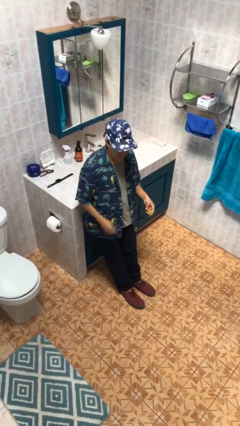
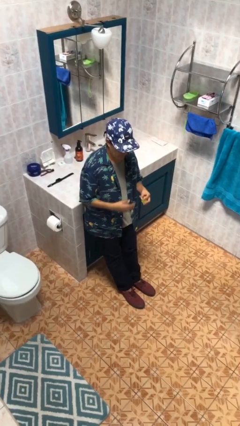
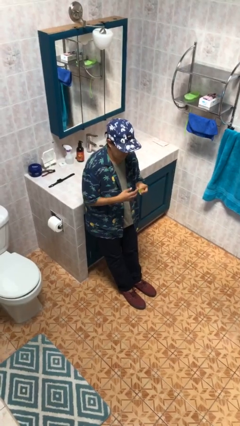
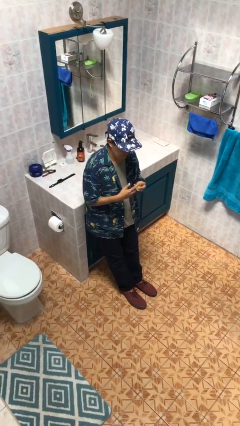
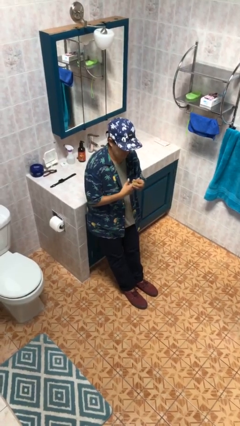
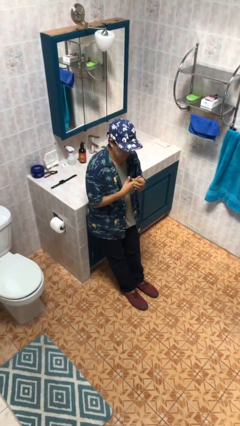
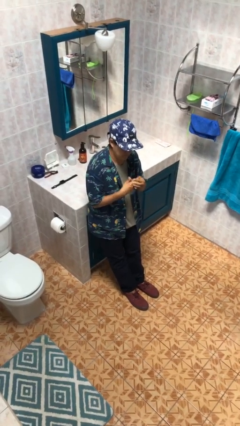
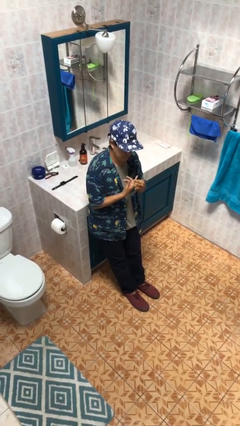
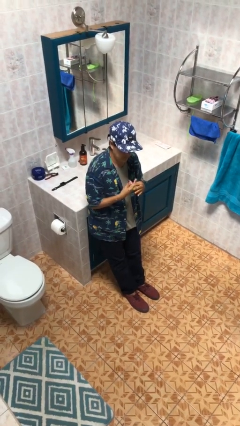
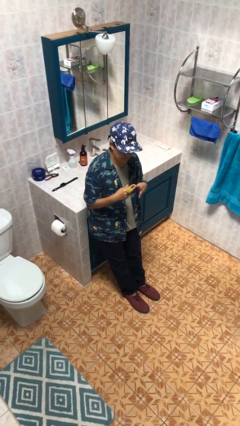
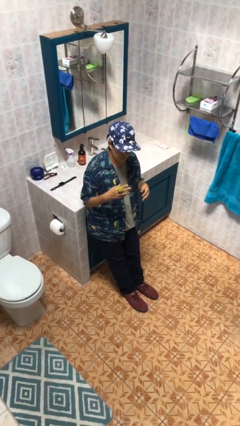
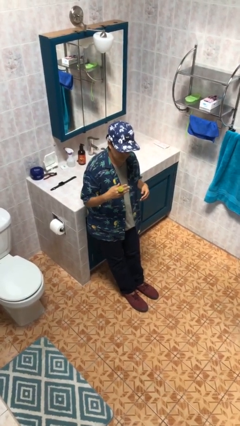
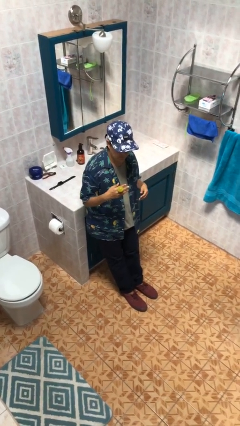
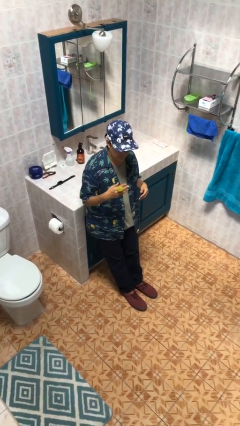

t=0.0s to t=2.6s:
person puts on ring

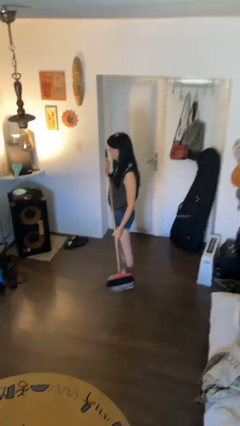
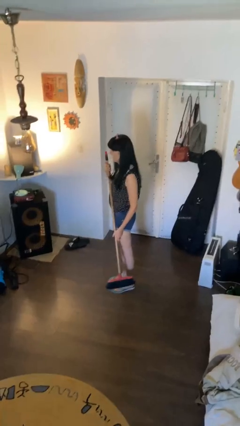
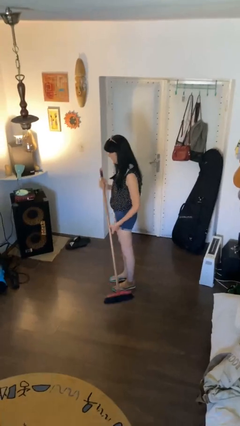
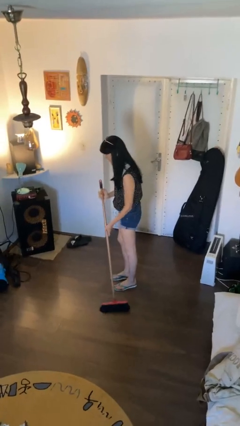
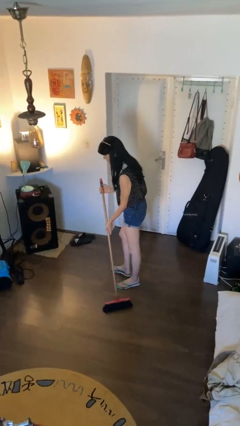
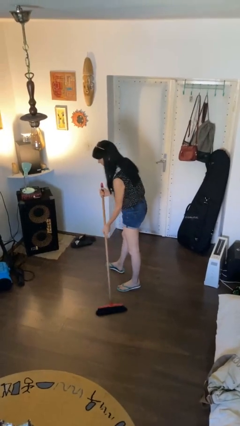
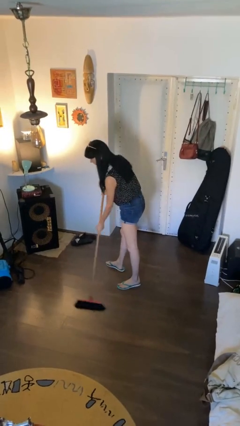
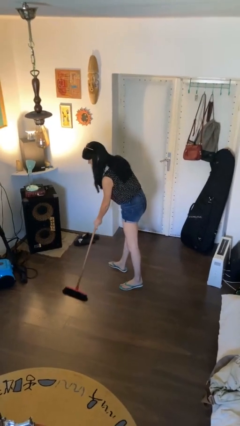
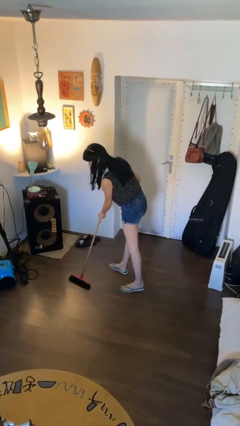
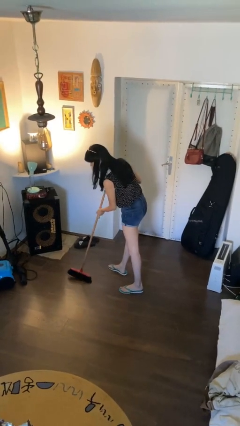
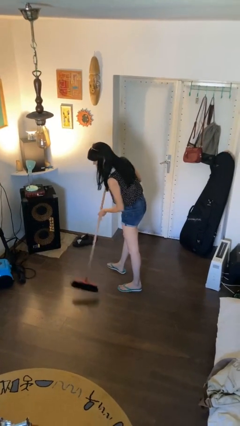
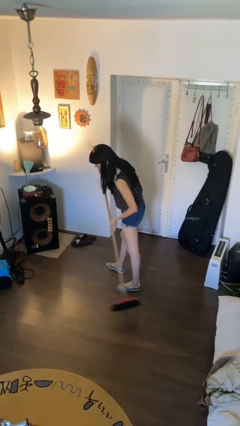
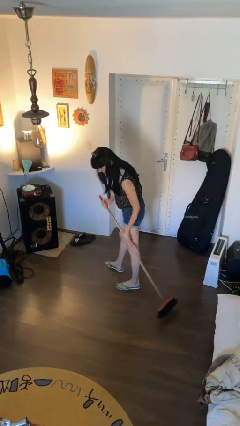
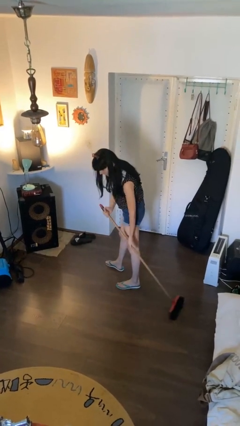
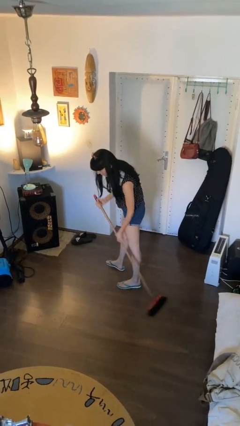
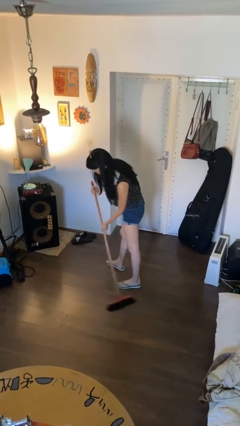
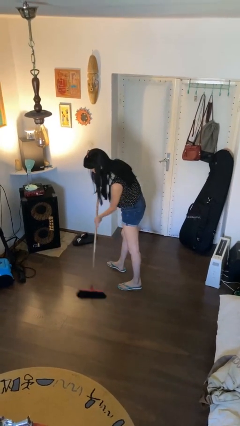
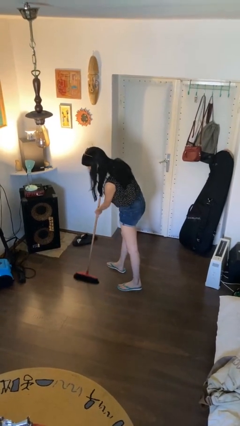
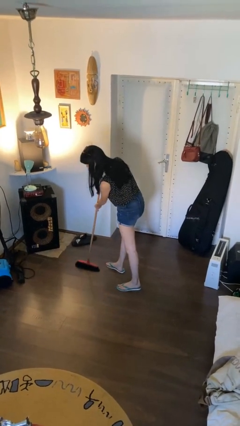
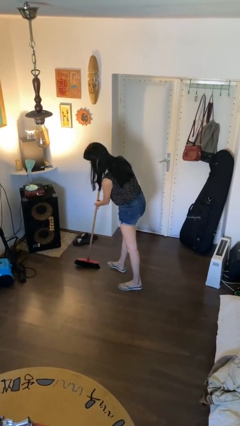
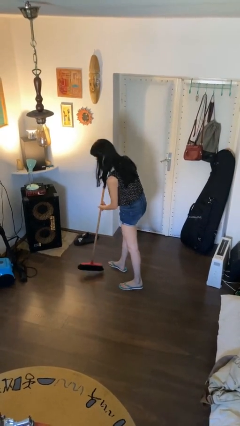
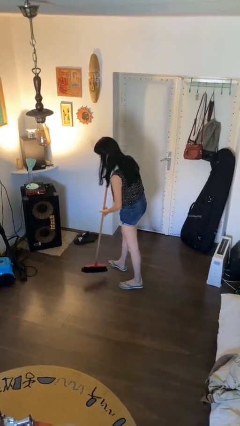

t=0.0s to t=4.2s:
person sweeps floor

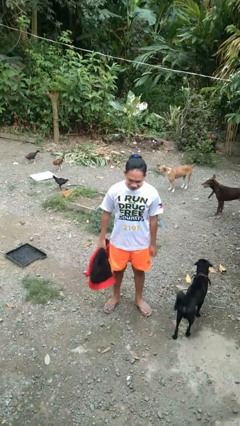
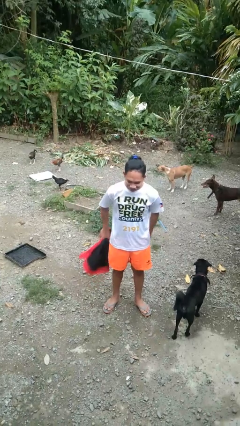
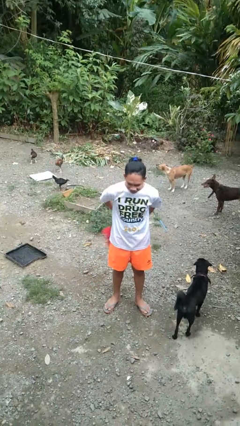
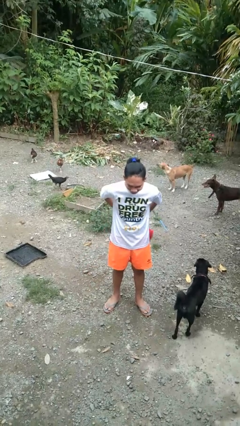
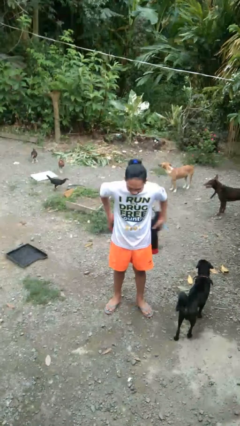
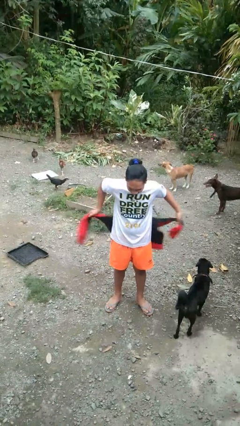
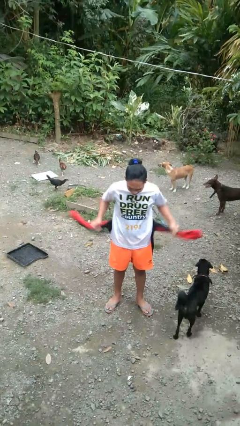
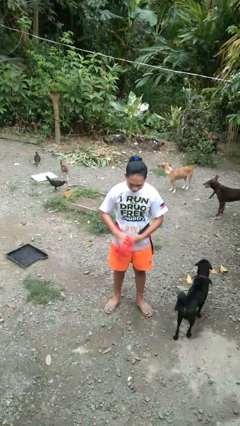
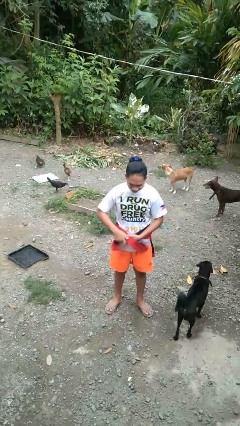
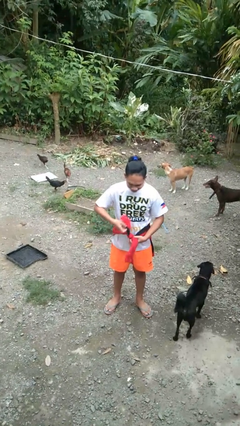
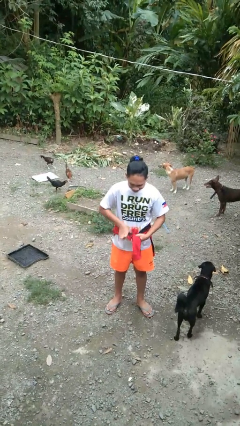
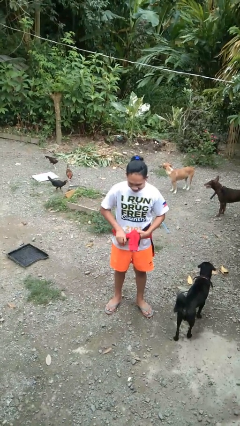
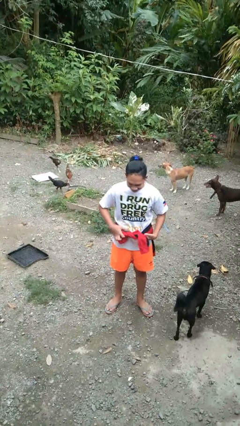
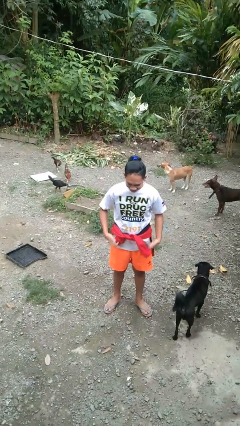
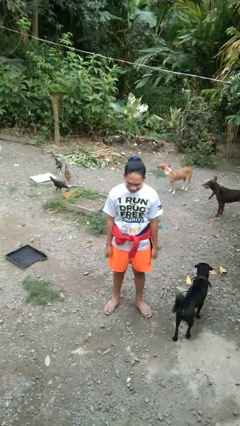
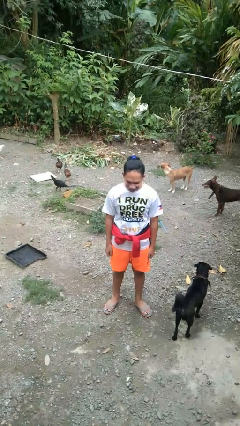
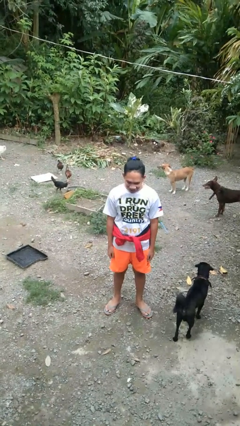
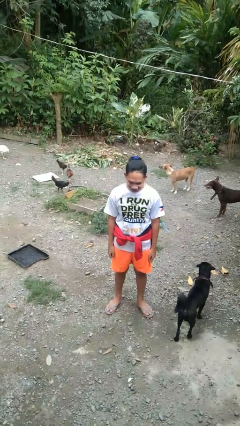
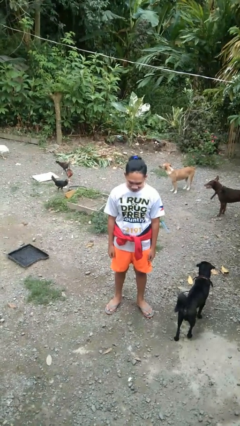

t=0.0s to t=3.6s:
person ties jacket around waist

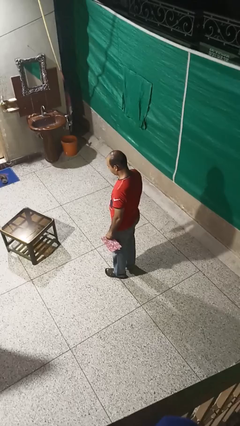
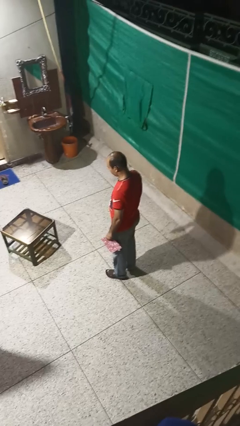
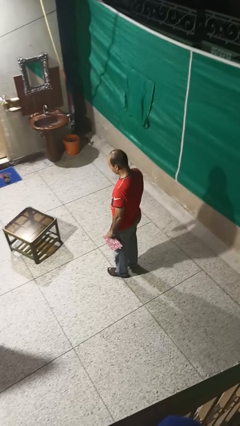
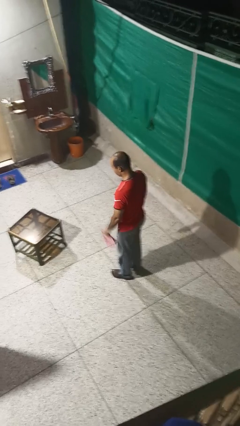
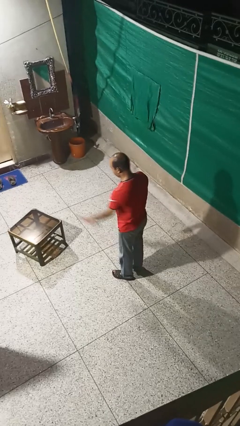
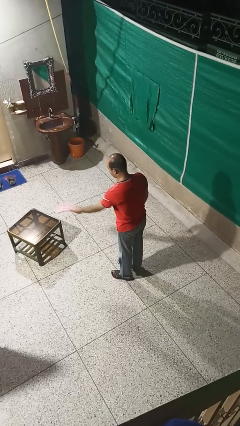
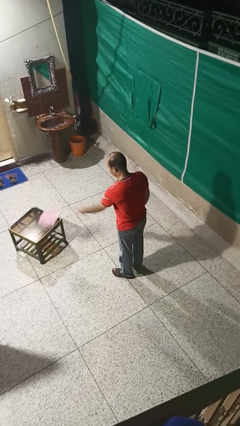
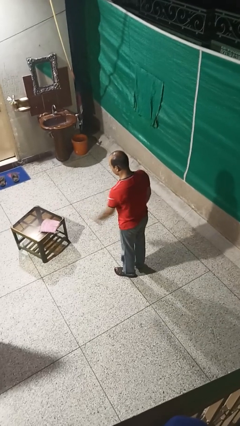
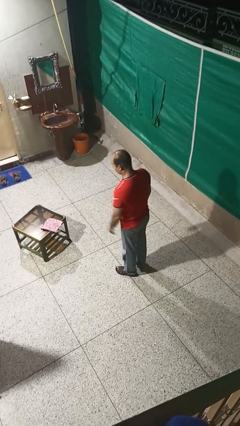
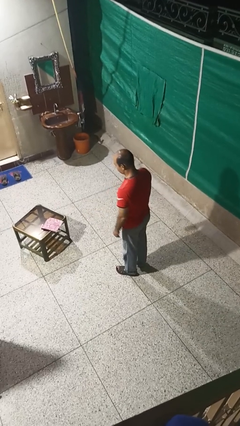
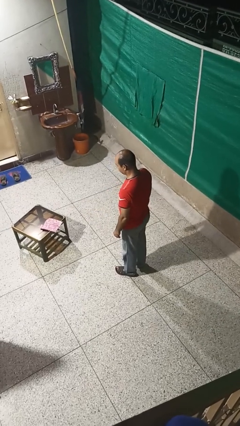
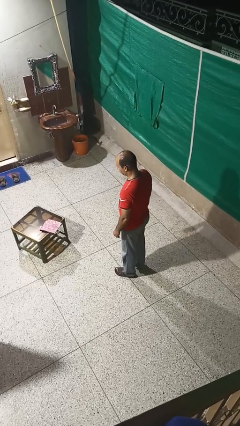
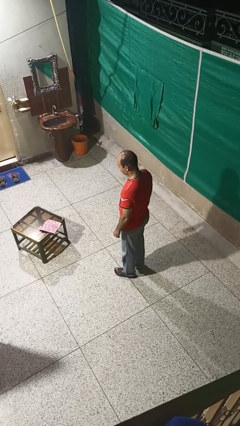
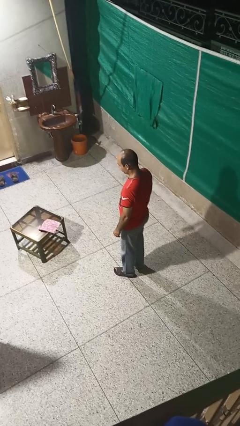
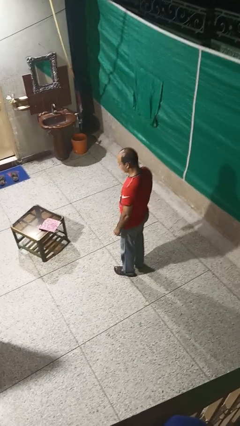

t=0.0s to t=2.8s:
person throws object on table

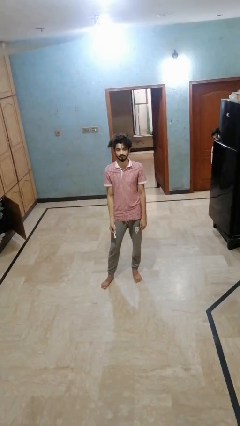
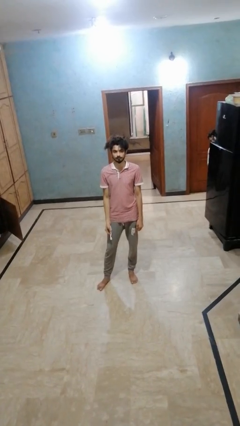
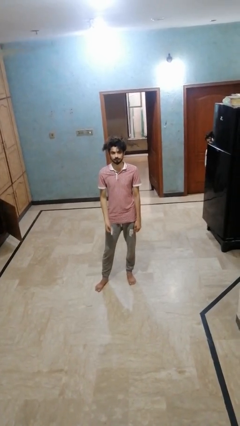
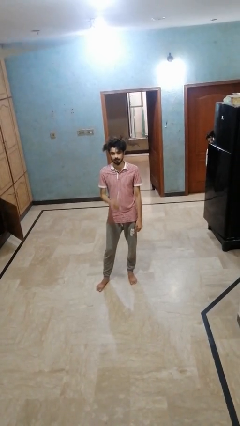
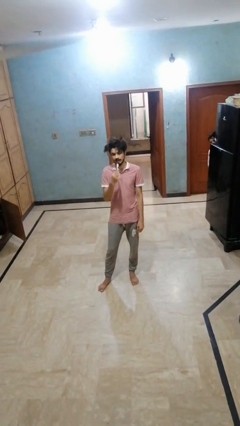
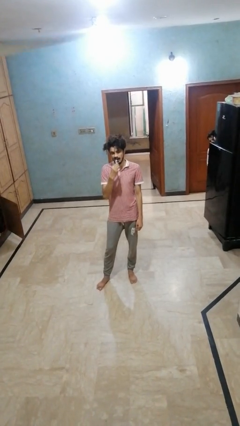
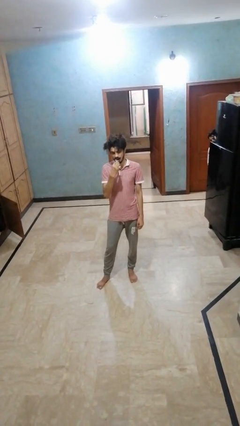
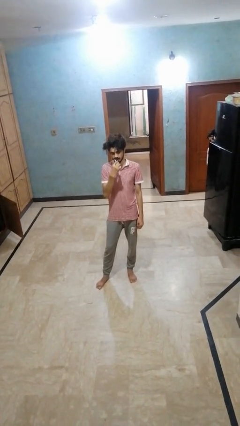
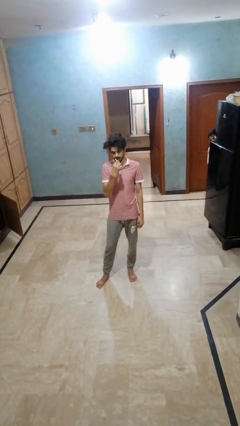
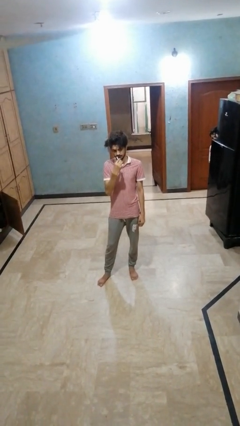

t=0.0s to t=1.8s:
person brushes teeth

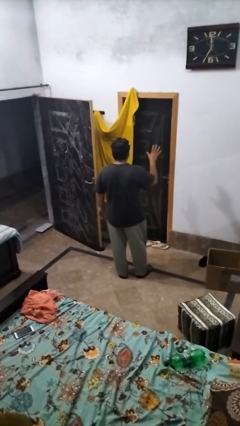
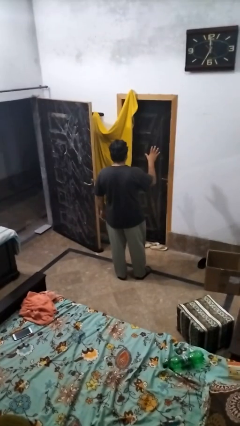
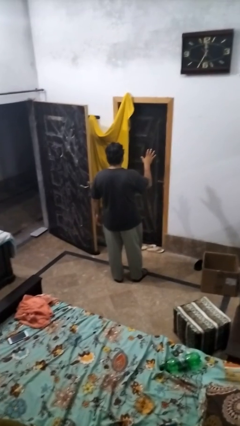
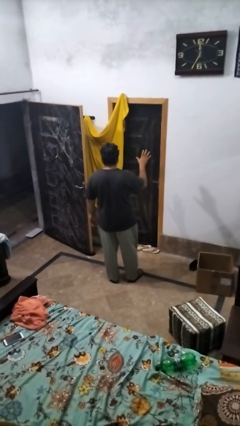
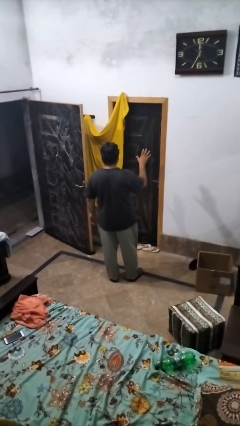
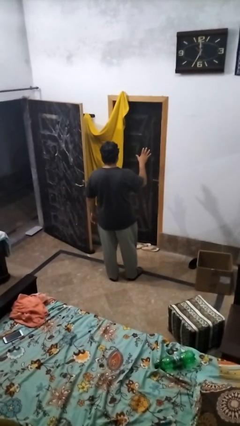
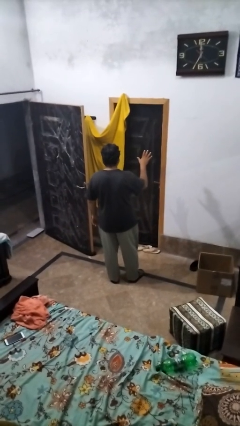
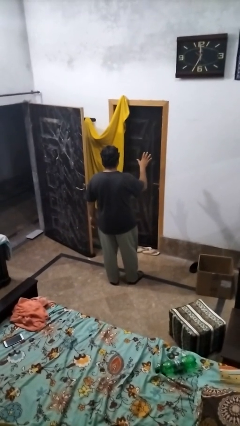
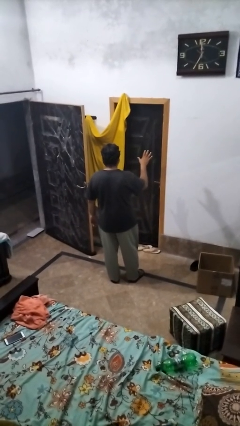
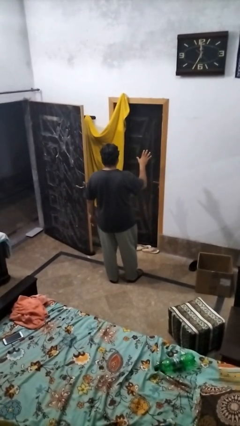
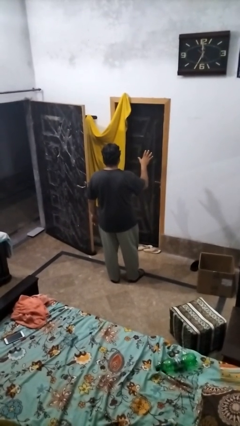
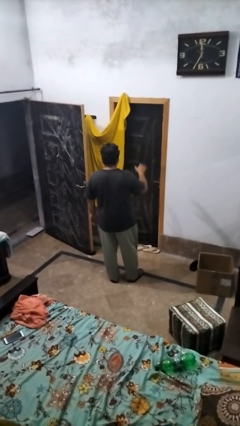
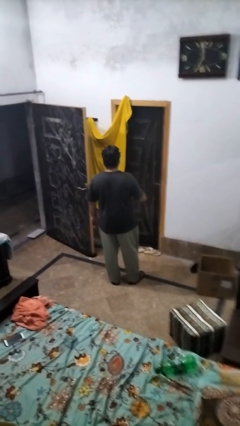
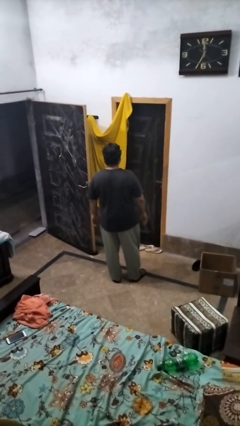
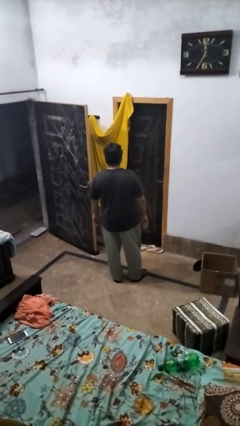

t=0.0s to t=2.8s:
person gestures stop
